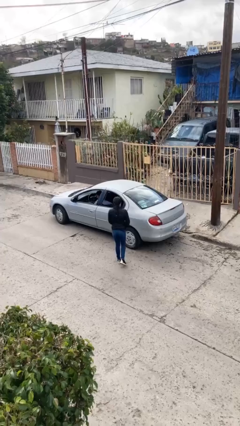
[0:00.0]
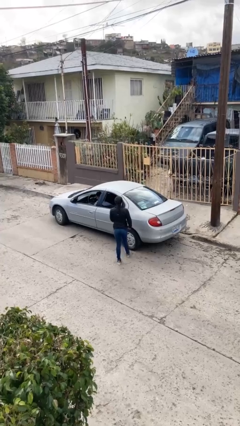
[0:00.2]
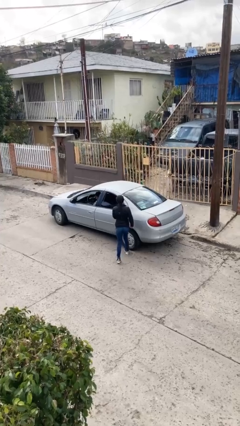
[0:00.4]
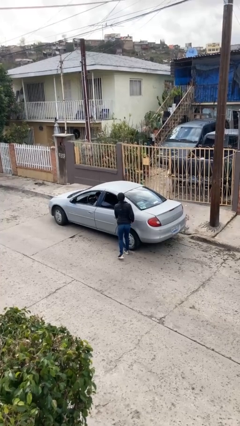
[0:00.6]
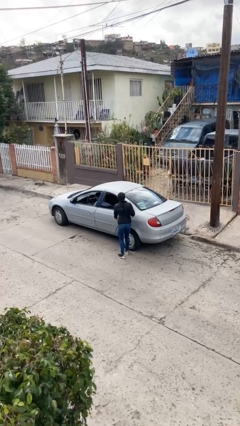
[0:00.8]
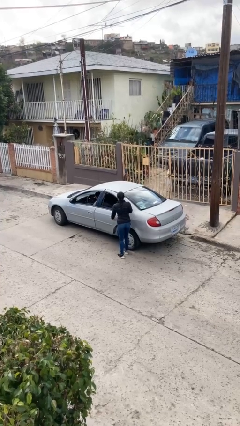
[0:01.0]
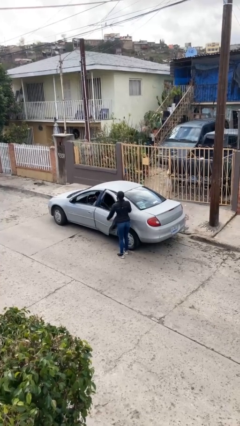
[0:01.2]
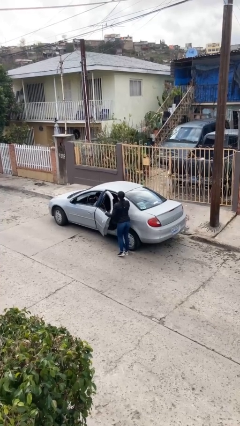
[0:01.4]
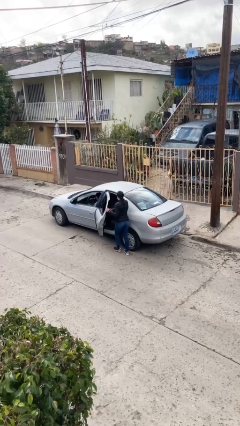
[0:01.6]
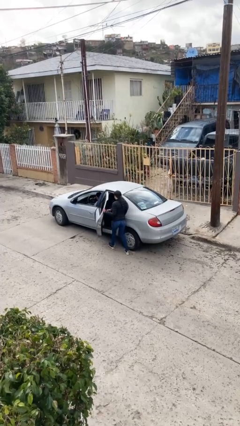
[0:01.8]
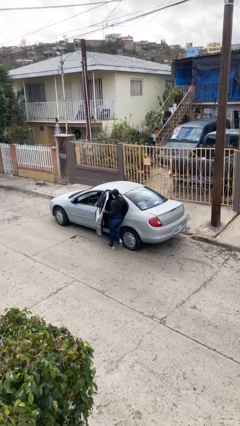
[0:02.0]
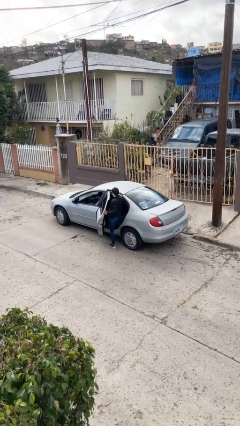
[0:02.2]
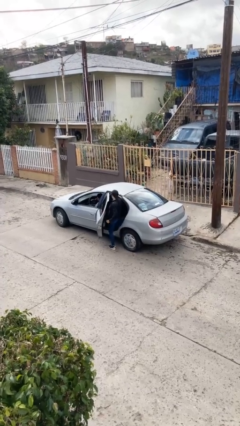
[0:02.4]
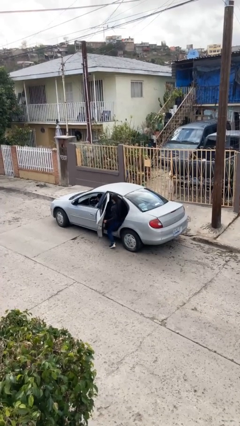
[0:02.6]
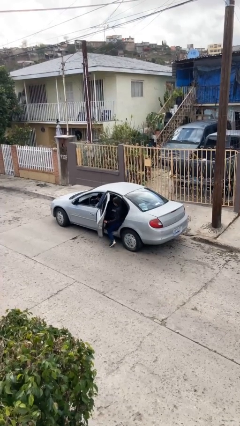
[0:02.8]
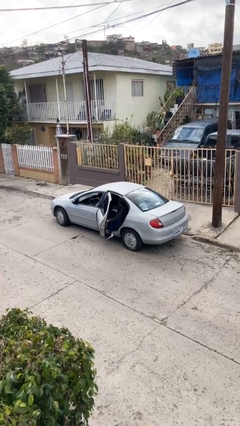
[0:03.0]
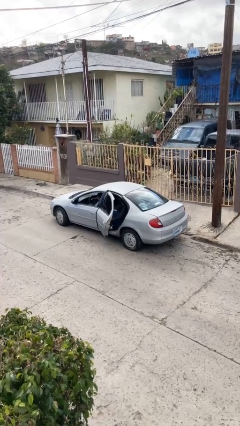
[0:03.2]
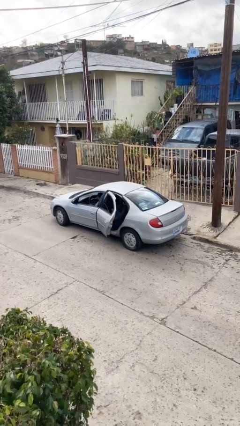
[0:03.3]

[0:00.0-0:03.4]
car picks up person

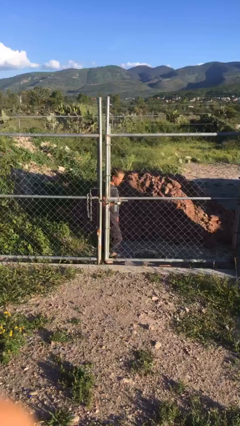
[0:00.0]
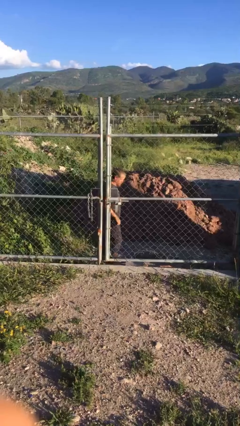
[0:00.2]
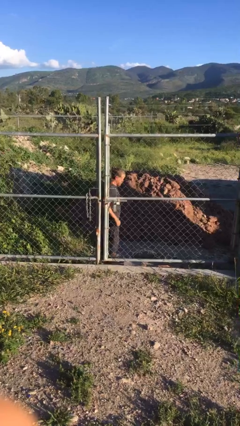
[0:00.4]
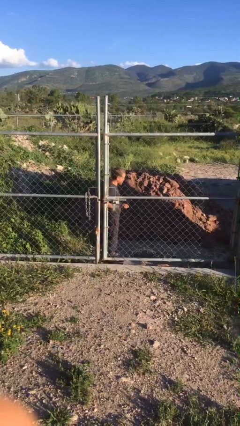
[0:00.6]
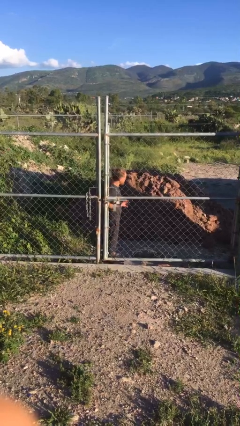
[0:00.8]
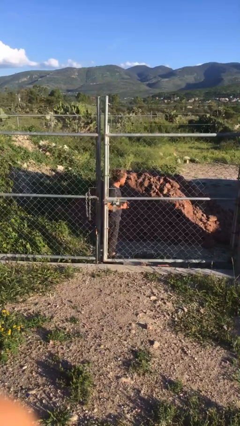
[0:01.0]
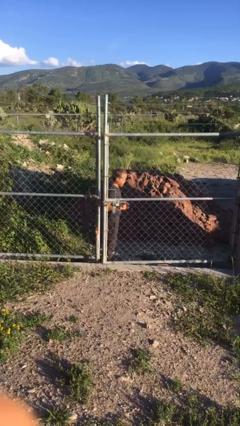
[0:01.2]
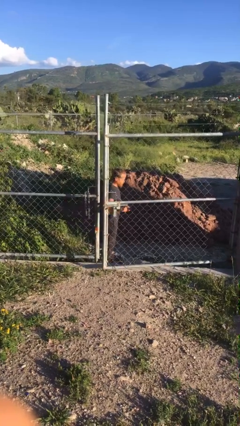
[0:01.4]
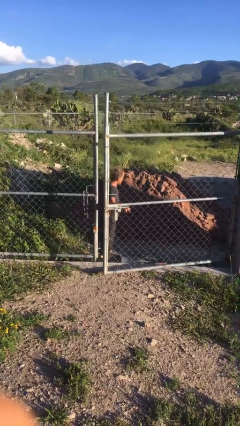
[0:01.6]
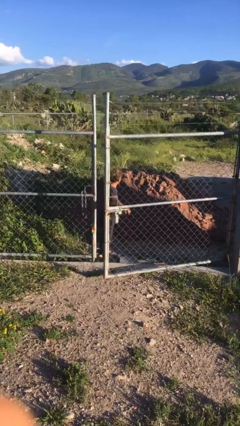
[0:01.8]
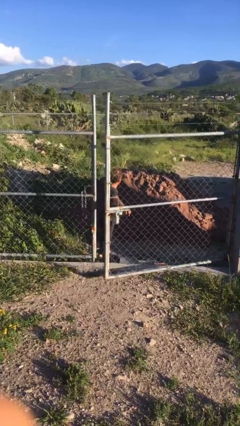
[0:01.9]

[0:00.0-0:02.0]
person opens gate

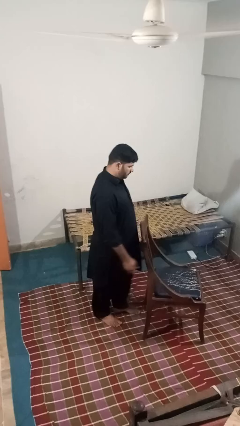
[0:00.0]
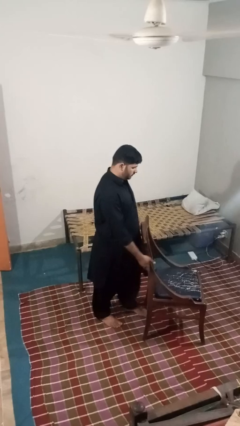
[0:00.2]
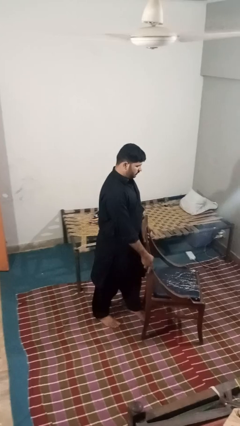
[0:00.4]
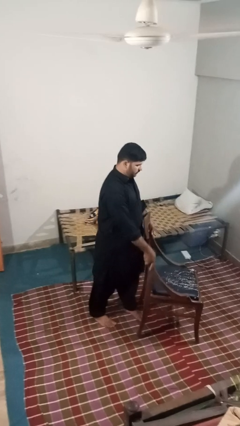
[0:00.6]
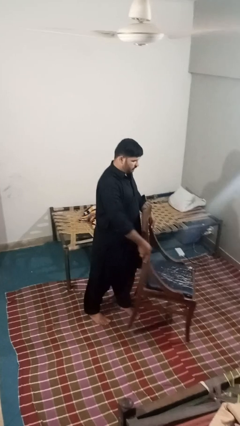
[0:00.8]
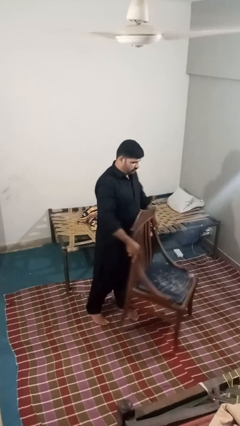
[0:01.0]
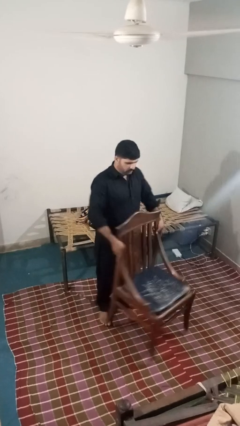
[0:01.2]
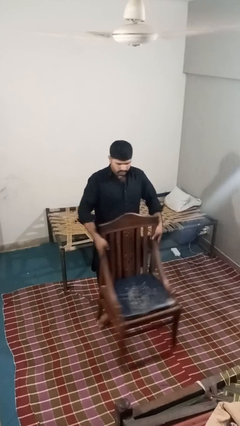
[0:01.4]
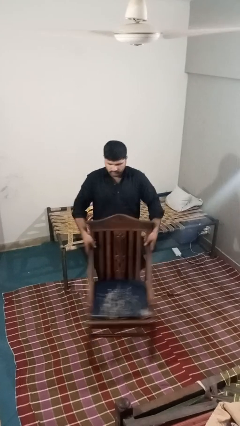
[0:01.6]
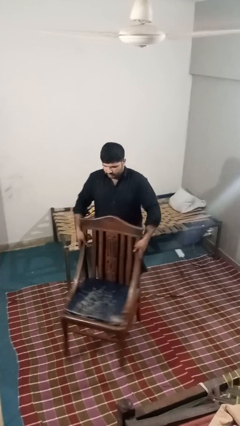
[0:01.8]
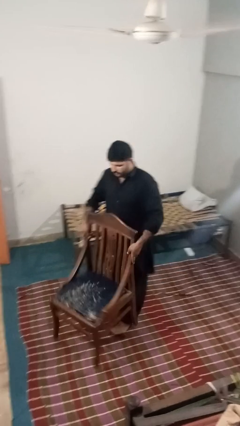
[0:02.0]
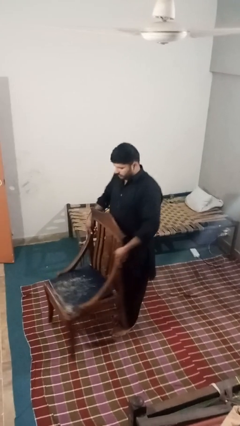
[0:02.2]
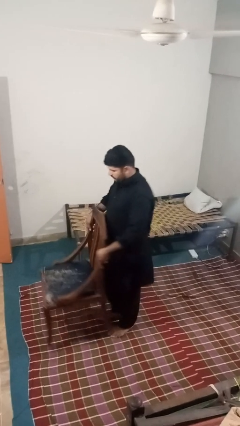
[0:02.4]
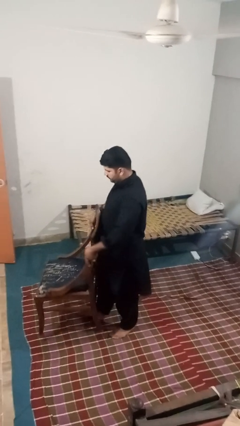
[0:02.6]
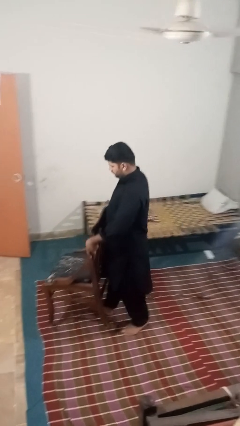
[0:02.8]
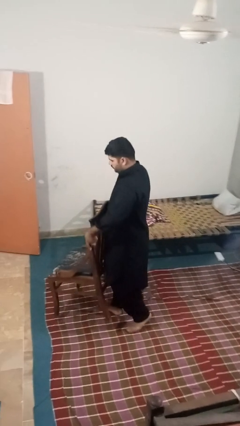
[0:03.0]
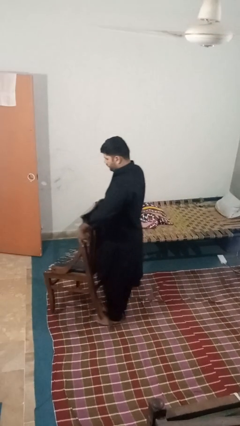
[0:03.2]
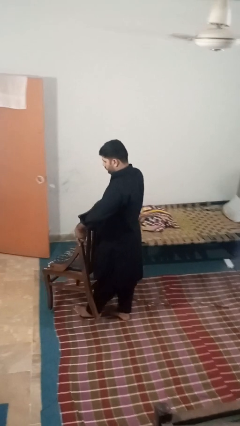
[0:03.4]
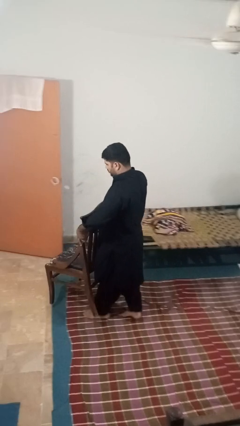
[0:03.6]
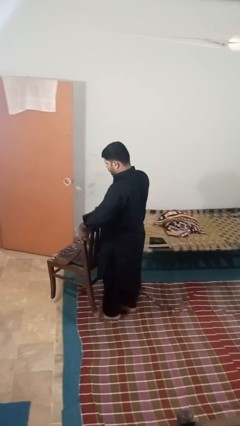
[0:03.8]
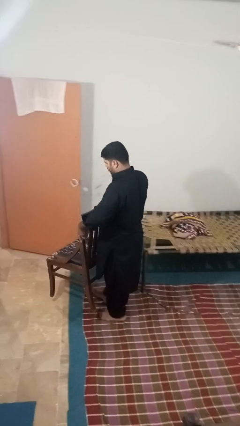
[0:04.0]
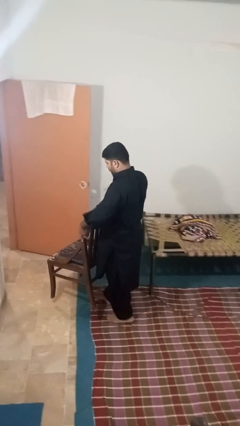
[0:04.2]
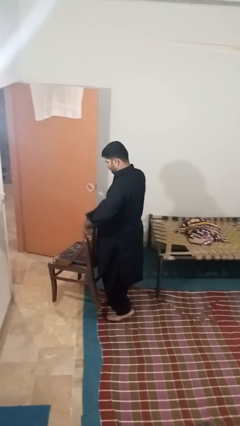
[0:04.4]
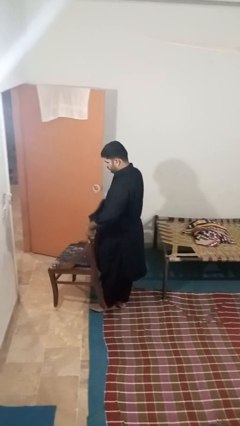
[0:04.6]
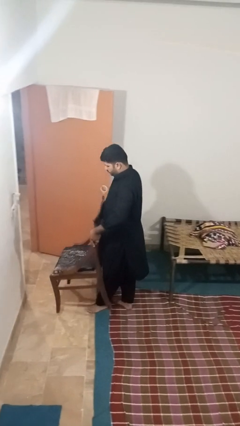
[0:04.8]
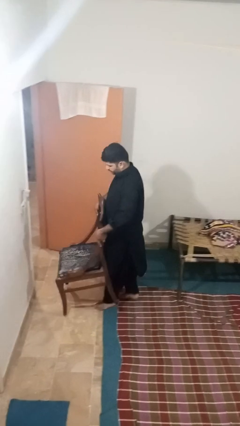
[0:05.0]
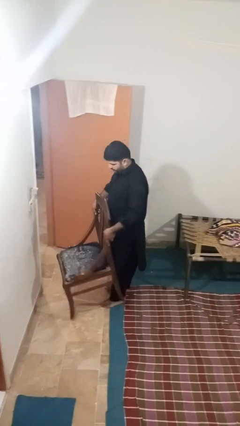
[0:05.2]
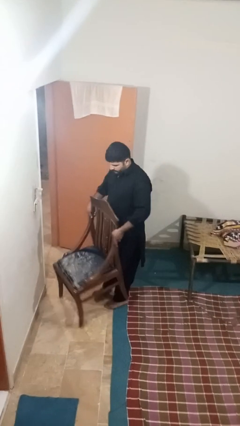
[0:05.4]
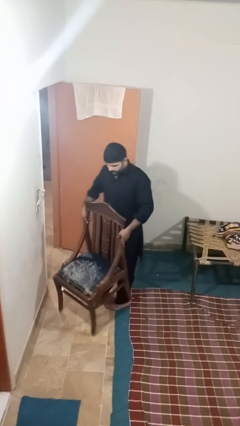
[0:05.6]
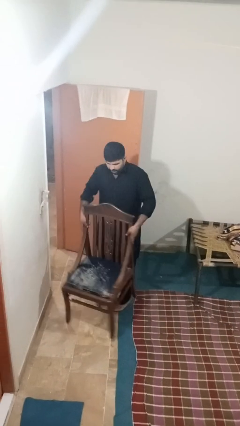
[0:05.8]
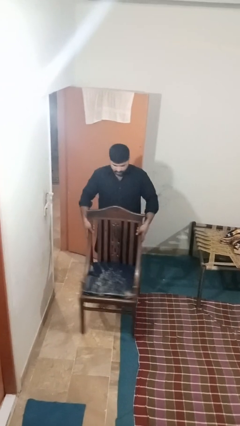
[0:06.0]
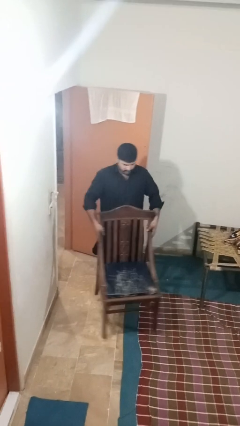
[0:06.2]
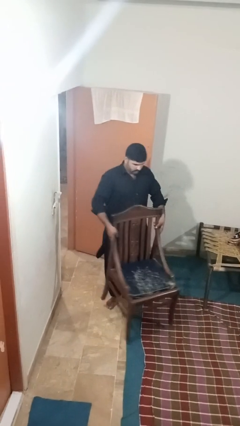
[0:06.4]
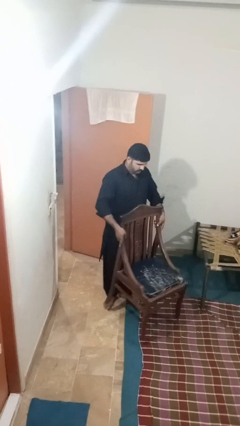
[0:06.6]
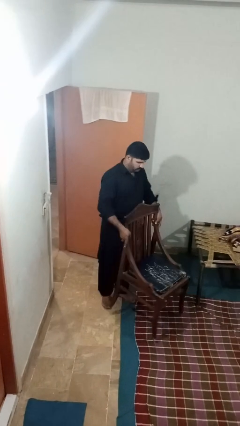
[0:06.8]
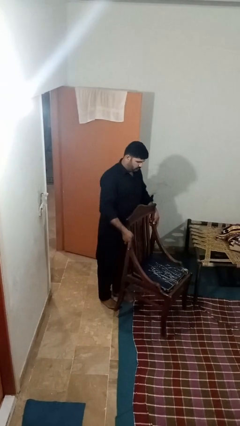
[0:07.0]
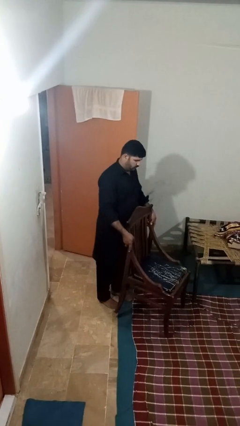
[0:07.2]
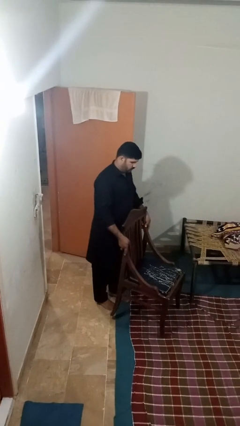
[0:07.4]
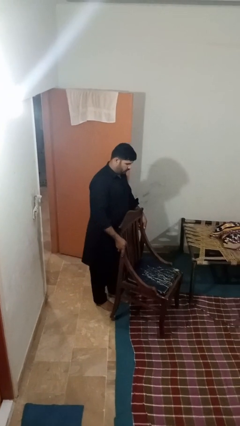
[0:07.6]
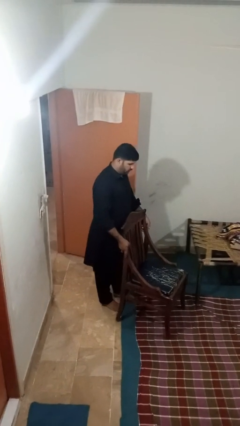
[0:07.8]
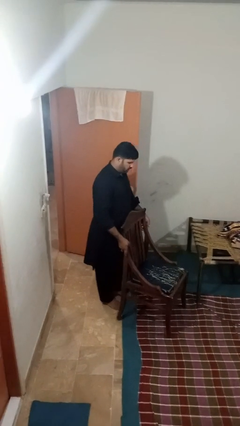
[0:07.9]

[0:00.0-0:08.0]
person carries furniture

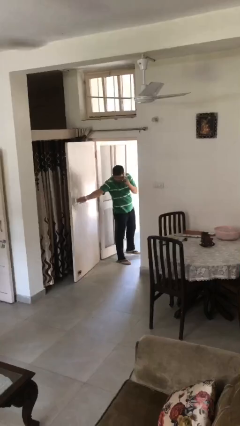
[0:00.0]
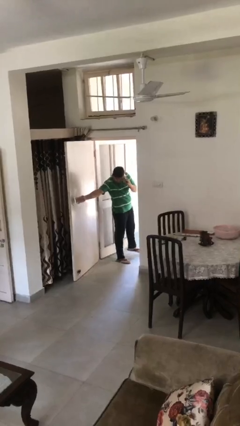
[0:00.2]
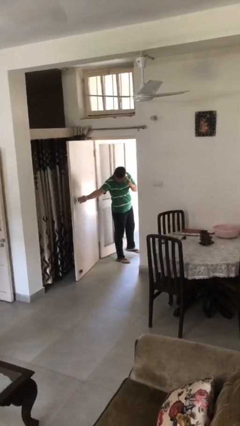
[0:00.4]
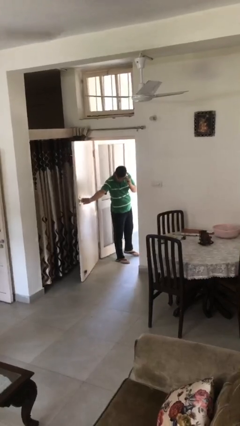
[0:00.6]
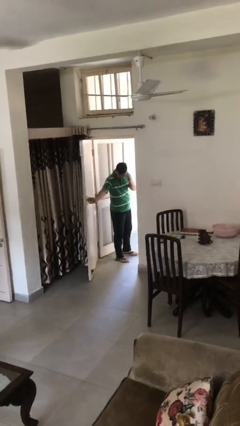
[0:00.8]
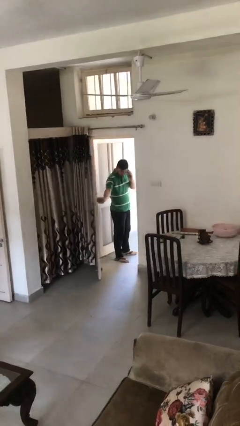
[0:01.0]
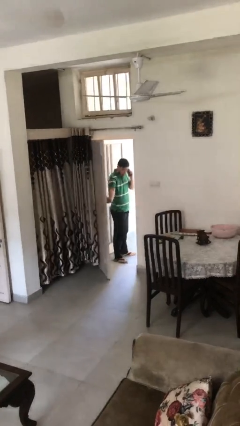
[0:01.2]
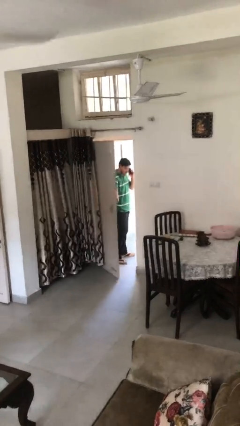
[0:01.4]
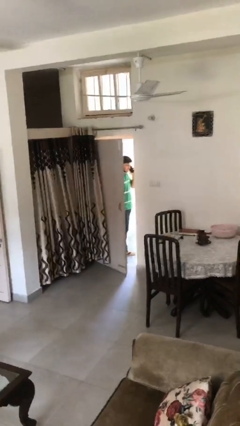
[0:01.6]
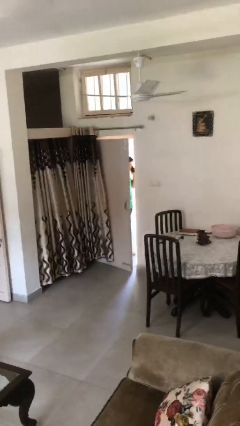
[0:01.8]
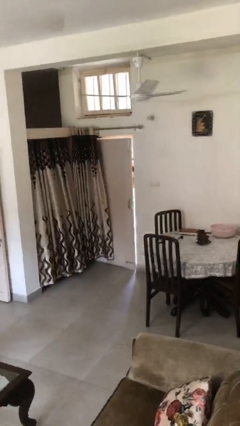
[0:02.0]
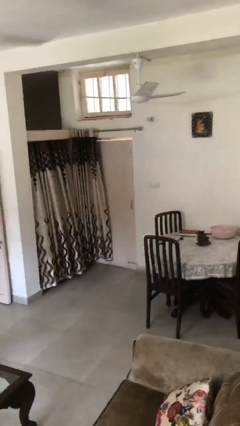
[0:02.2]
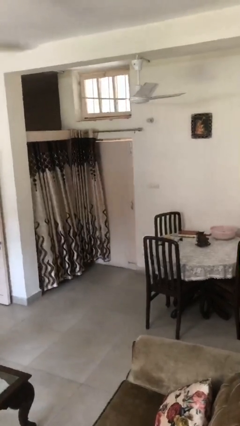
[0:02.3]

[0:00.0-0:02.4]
person closes facility door

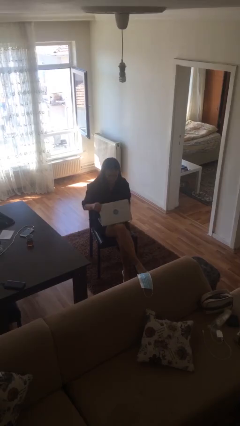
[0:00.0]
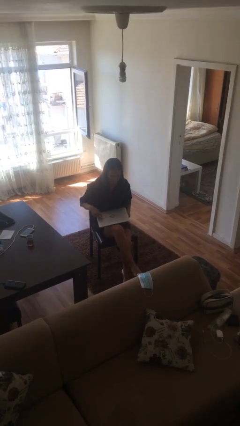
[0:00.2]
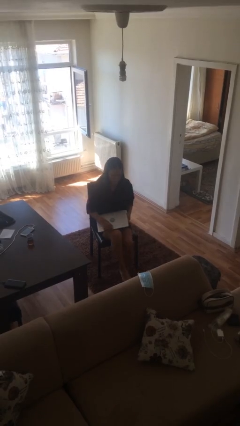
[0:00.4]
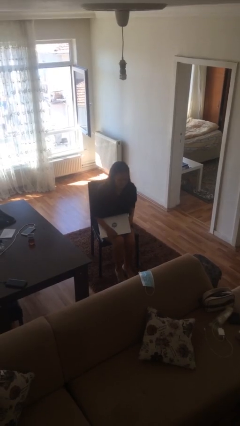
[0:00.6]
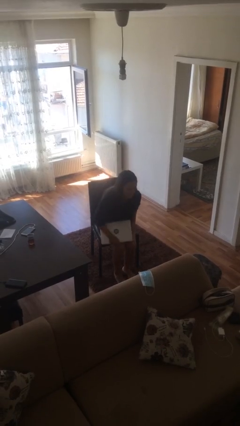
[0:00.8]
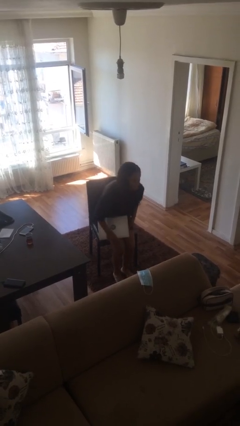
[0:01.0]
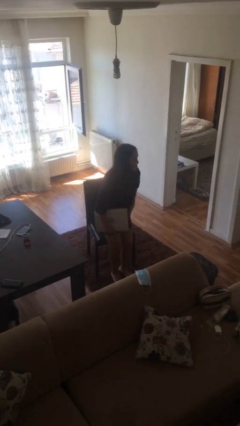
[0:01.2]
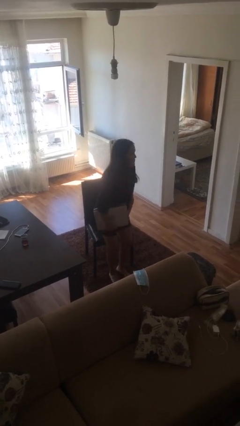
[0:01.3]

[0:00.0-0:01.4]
person stands up

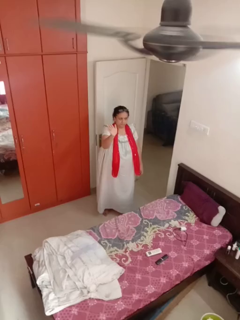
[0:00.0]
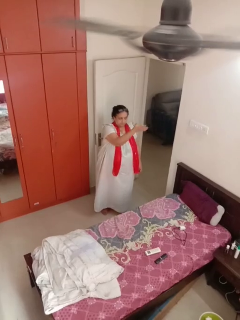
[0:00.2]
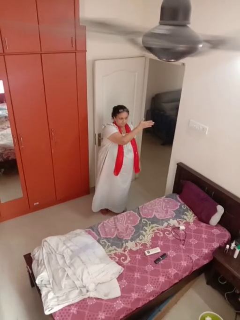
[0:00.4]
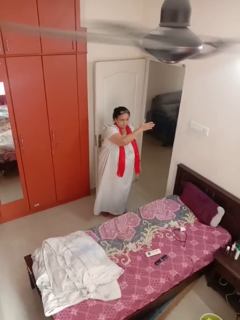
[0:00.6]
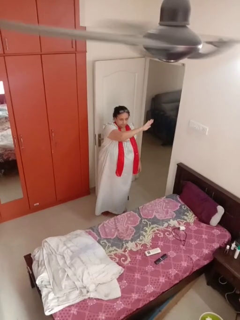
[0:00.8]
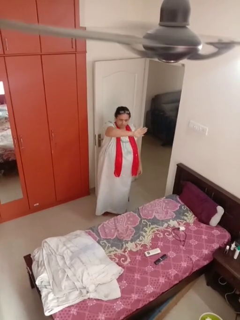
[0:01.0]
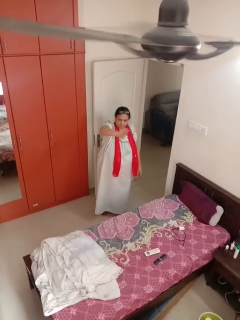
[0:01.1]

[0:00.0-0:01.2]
person gestures swipe left
